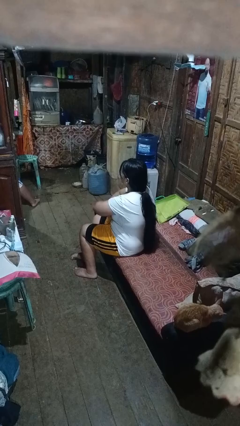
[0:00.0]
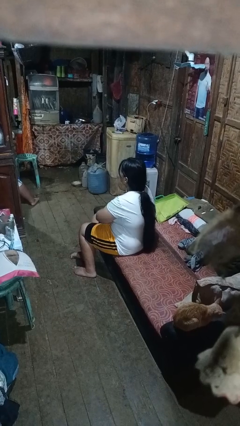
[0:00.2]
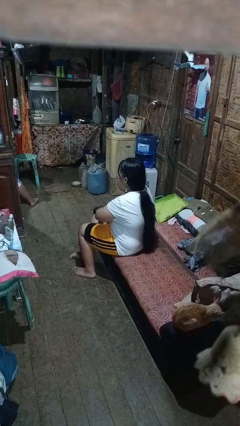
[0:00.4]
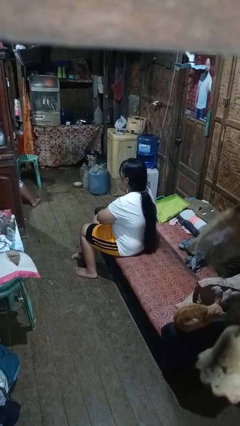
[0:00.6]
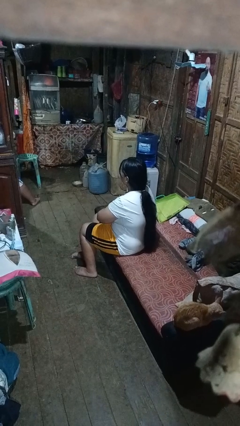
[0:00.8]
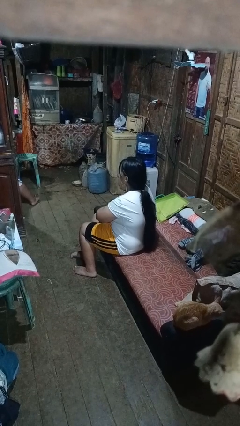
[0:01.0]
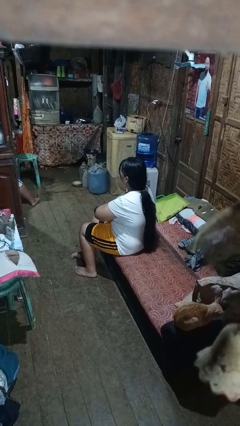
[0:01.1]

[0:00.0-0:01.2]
person gestures arms x

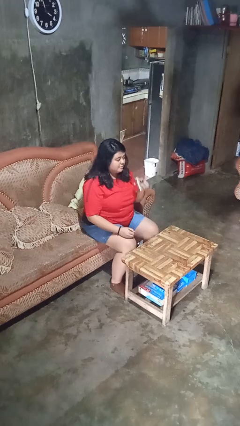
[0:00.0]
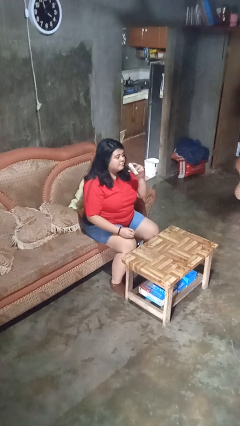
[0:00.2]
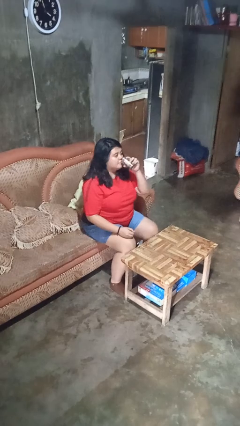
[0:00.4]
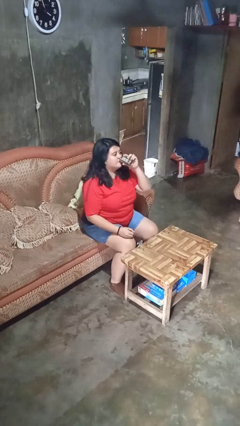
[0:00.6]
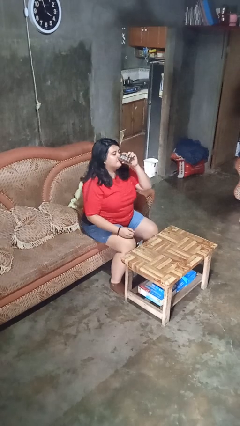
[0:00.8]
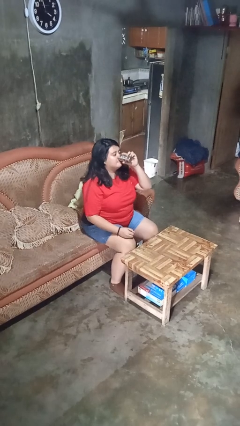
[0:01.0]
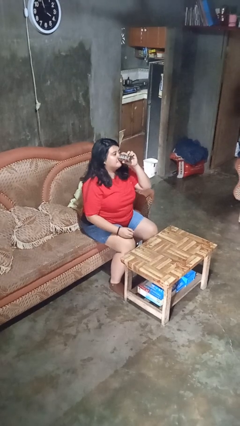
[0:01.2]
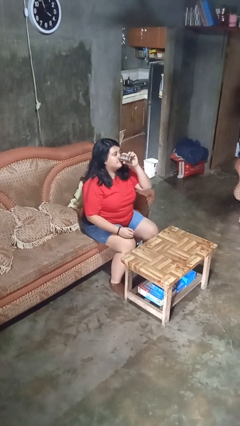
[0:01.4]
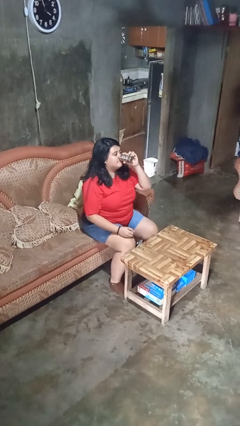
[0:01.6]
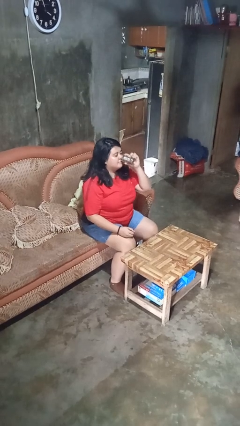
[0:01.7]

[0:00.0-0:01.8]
person drinks from beverage can

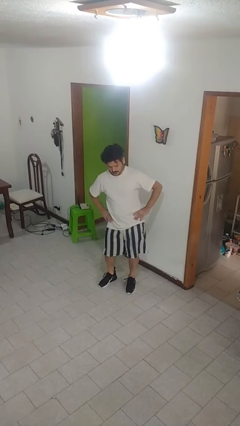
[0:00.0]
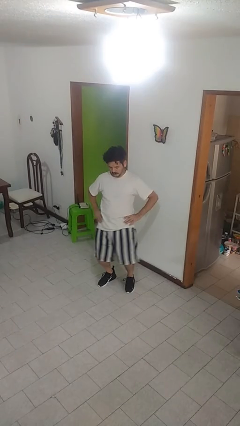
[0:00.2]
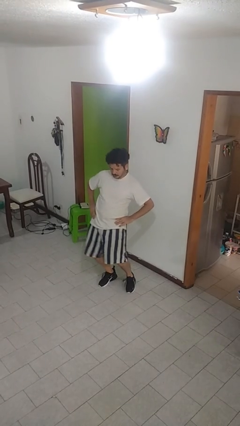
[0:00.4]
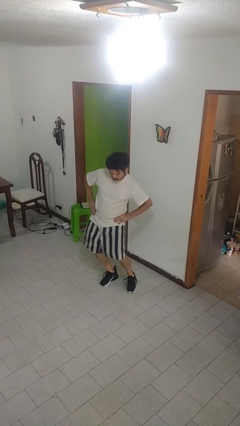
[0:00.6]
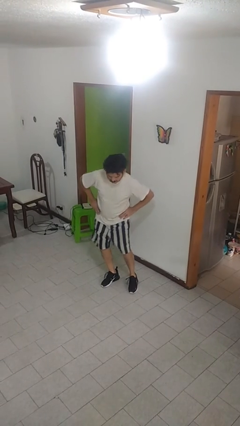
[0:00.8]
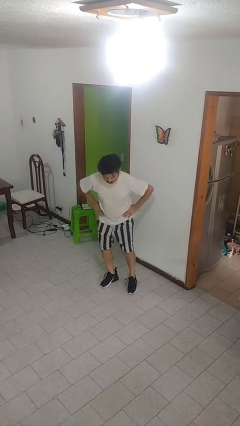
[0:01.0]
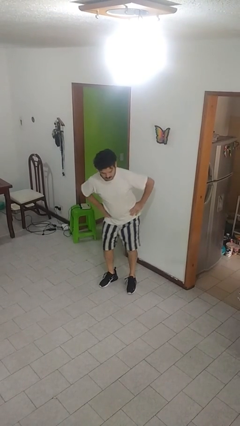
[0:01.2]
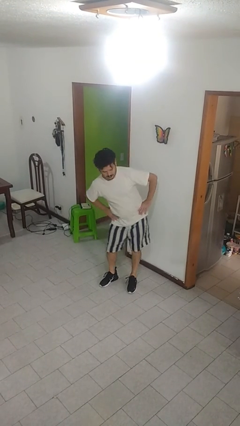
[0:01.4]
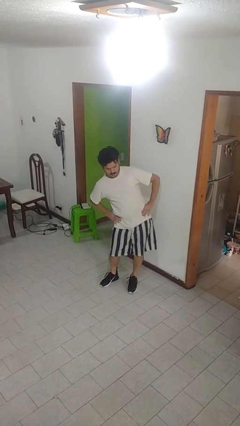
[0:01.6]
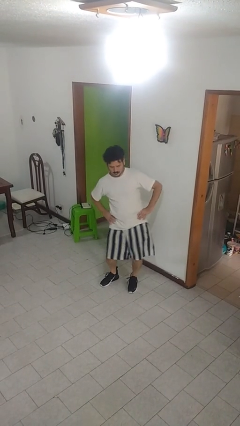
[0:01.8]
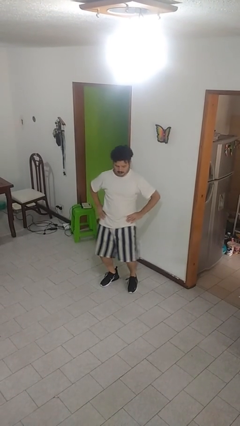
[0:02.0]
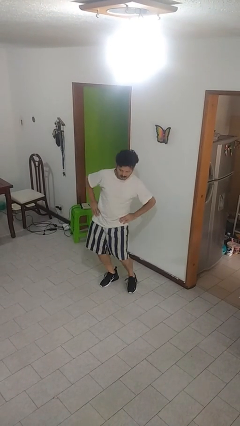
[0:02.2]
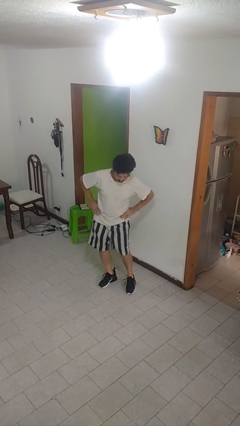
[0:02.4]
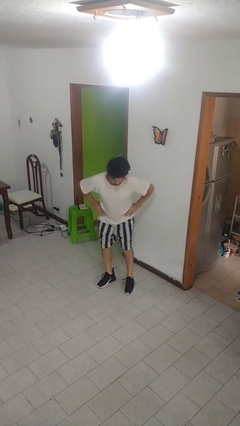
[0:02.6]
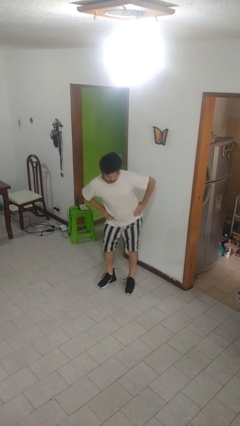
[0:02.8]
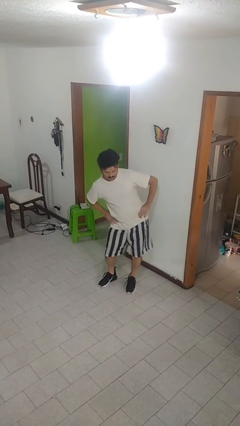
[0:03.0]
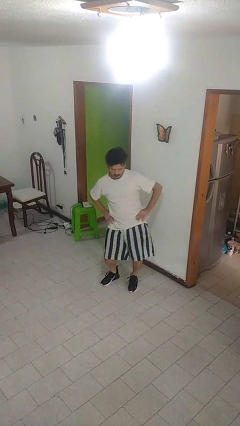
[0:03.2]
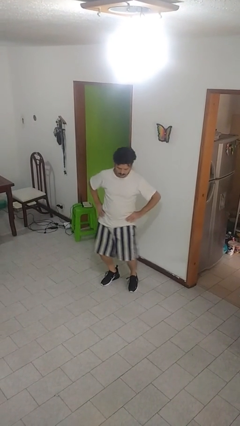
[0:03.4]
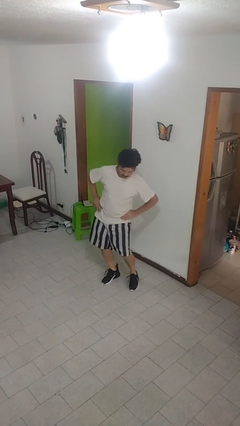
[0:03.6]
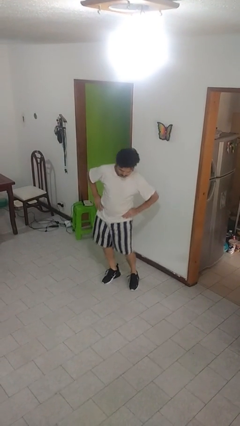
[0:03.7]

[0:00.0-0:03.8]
person wiggles hips

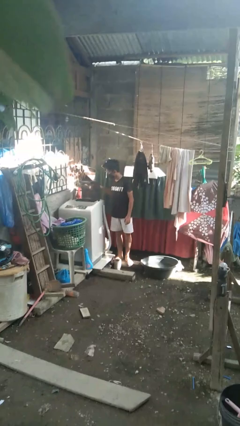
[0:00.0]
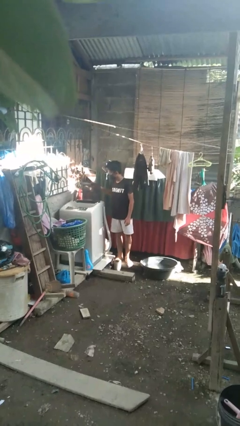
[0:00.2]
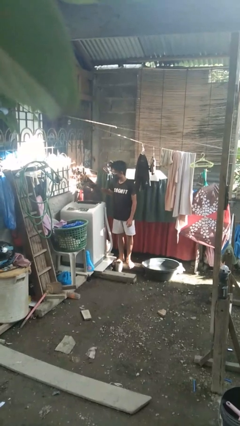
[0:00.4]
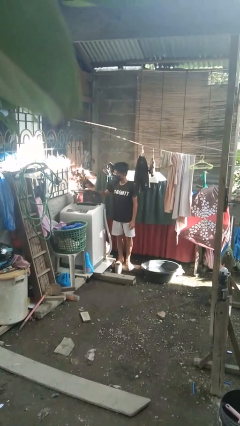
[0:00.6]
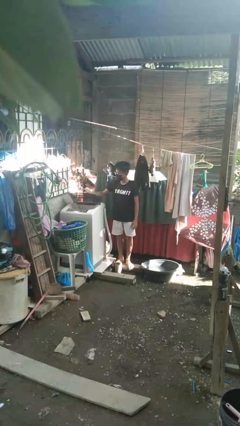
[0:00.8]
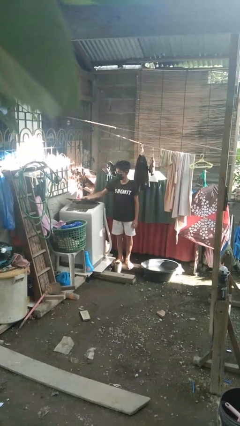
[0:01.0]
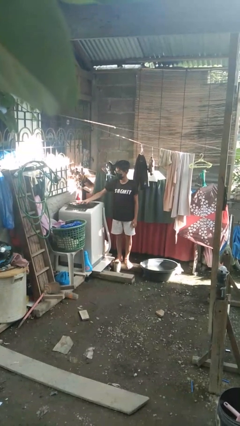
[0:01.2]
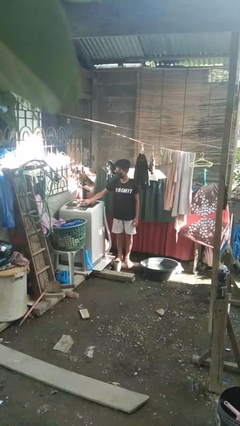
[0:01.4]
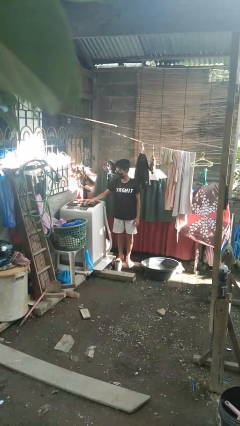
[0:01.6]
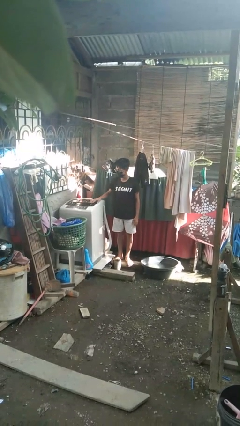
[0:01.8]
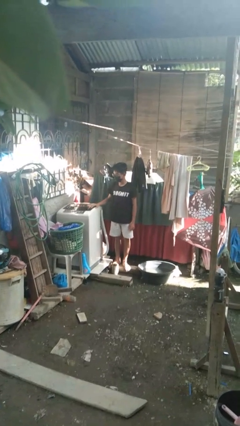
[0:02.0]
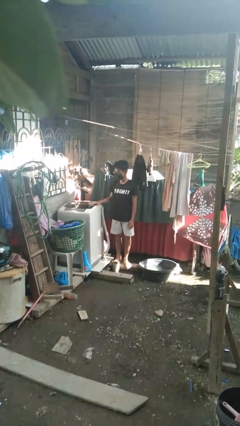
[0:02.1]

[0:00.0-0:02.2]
person closes clothes washer

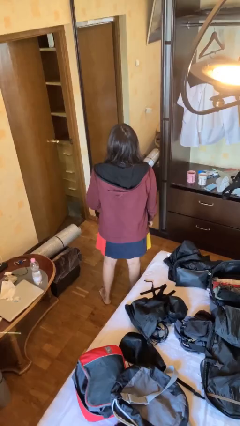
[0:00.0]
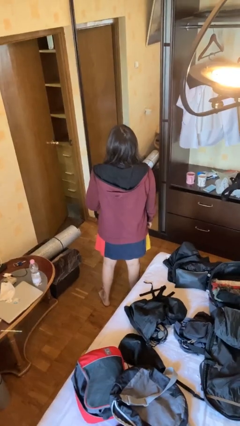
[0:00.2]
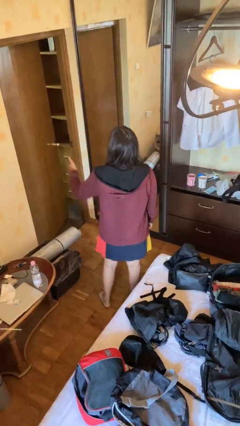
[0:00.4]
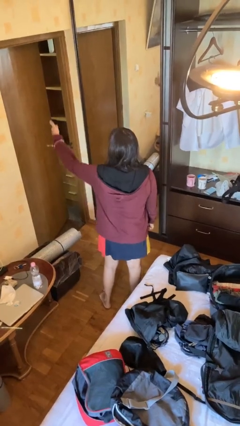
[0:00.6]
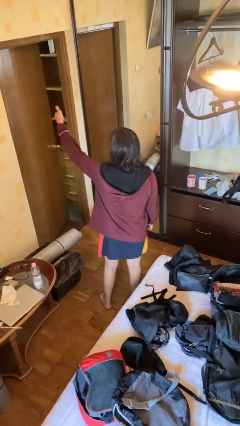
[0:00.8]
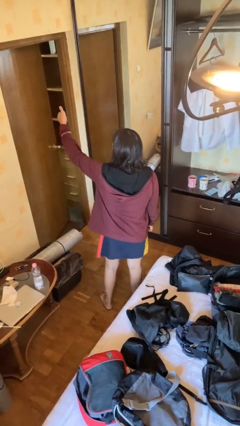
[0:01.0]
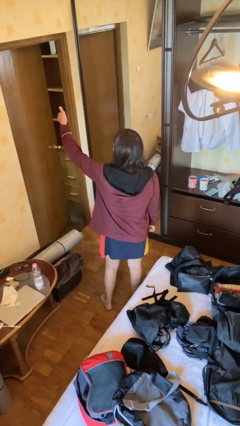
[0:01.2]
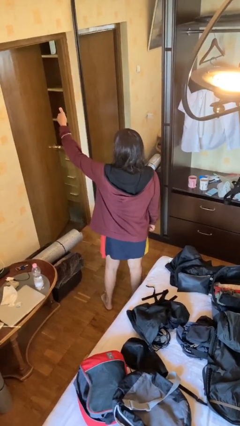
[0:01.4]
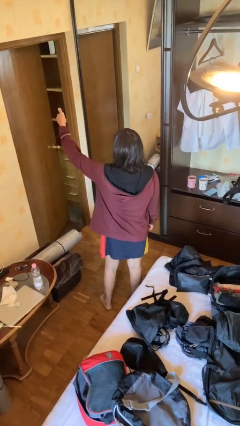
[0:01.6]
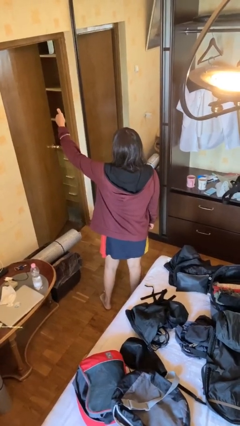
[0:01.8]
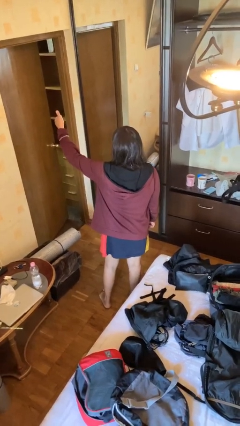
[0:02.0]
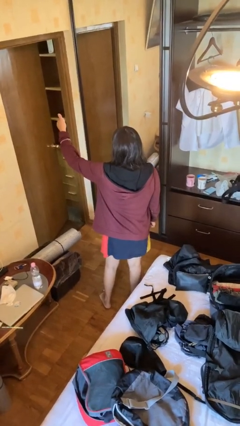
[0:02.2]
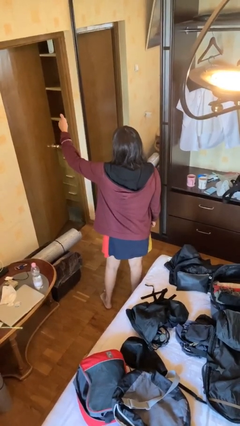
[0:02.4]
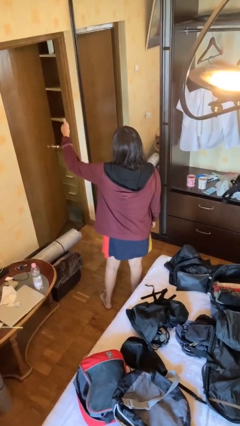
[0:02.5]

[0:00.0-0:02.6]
person gestures thumbs up

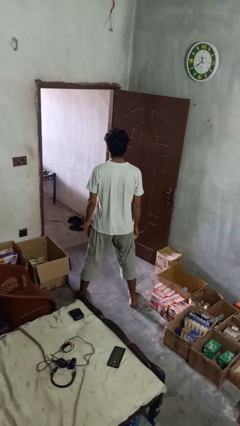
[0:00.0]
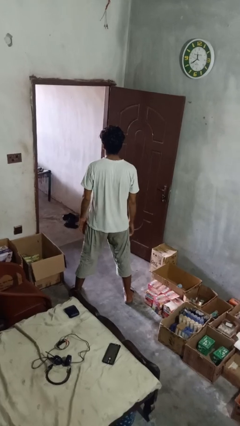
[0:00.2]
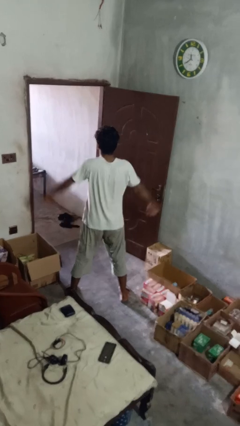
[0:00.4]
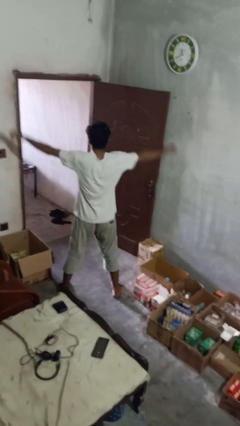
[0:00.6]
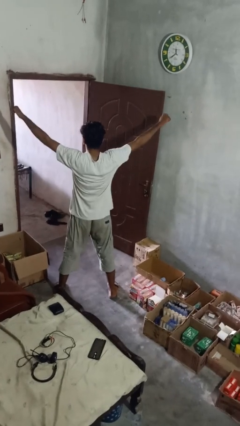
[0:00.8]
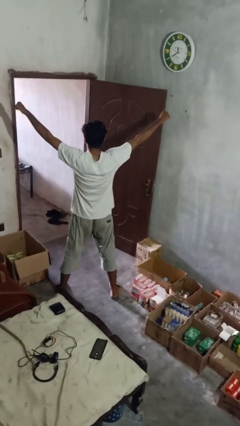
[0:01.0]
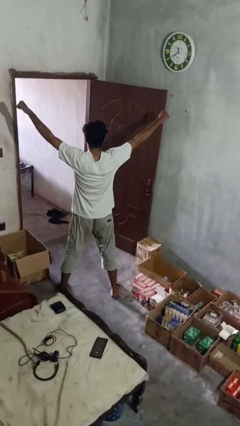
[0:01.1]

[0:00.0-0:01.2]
person stretches arms to side

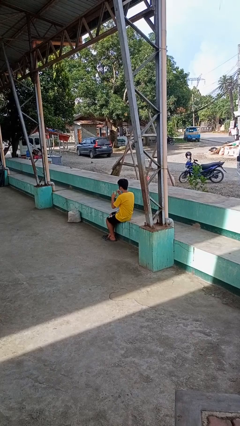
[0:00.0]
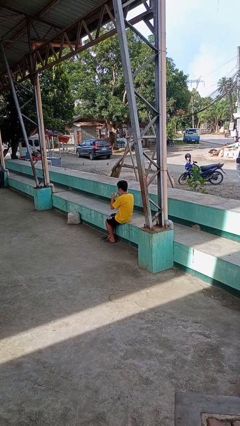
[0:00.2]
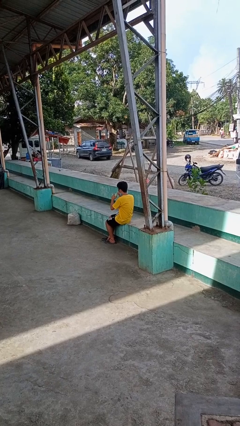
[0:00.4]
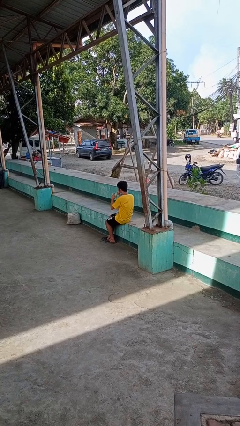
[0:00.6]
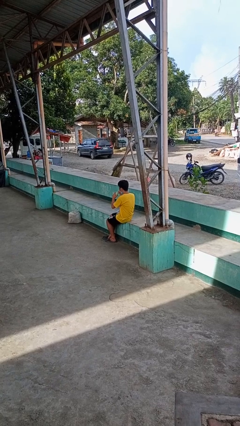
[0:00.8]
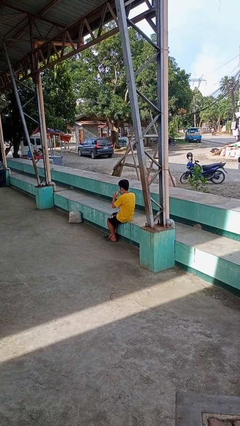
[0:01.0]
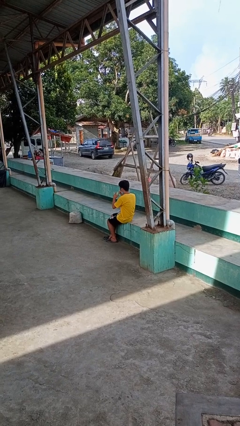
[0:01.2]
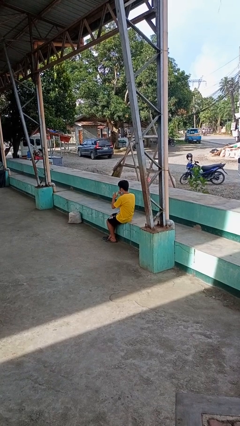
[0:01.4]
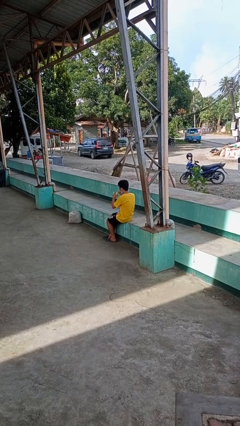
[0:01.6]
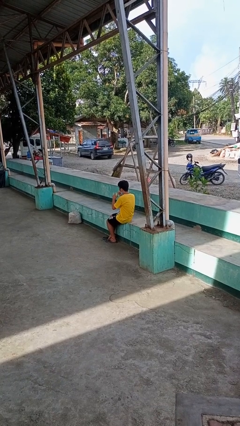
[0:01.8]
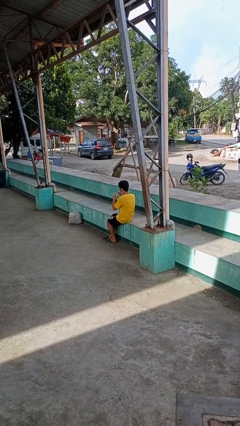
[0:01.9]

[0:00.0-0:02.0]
person drinks from straw

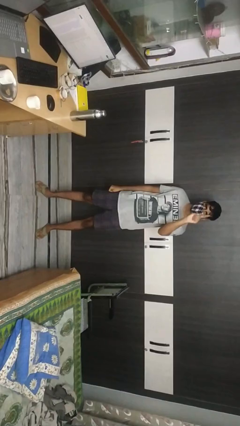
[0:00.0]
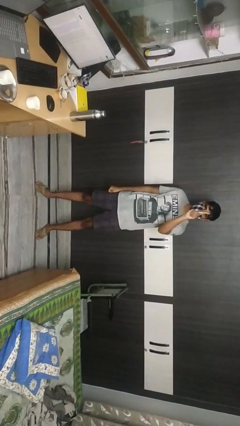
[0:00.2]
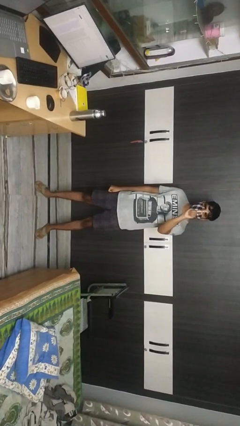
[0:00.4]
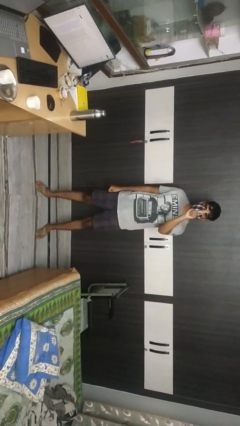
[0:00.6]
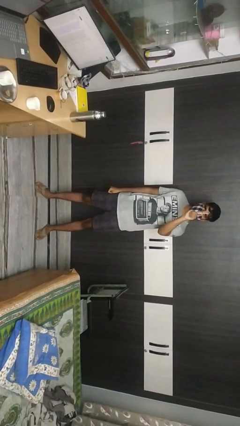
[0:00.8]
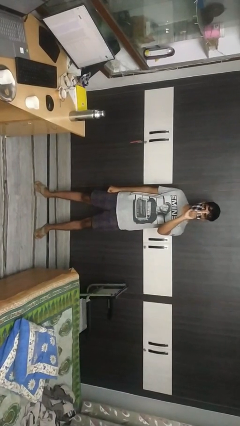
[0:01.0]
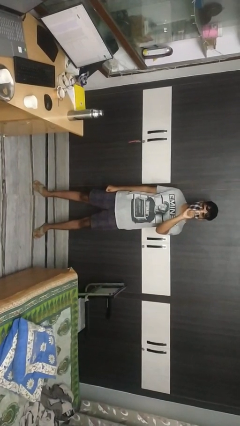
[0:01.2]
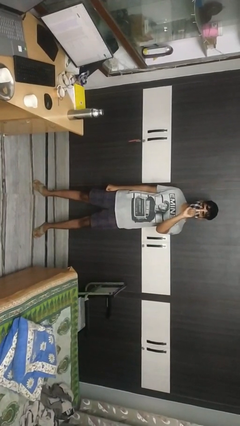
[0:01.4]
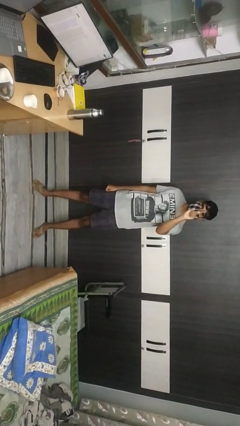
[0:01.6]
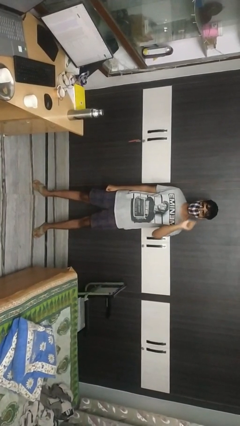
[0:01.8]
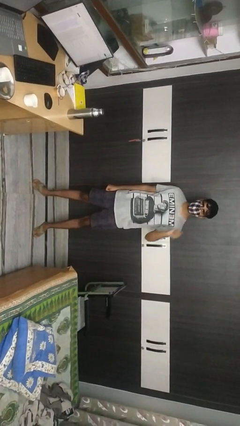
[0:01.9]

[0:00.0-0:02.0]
person gestures number one
